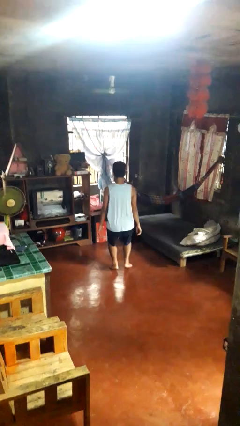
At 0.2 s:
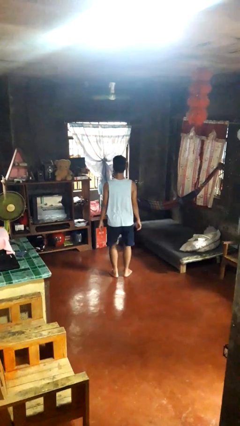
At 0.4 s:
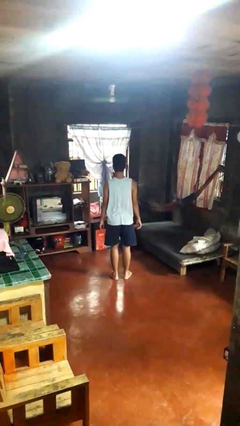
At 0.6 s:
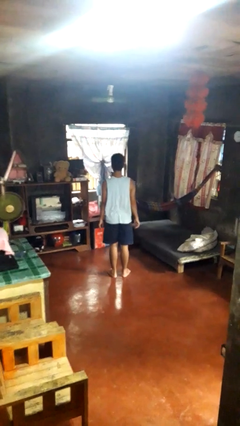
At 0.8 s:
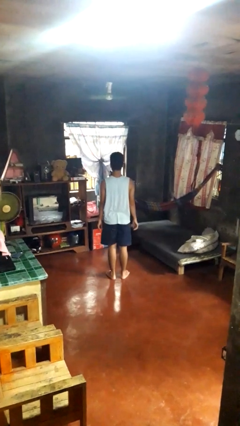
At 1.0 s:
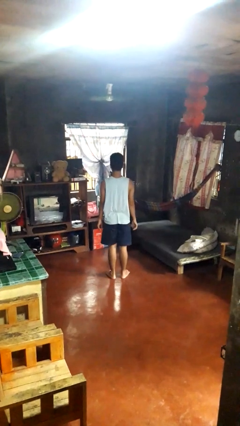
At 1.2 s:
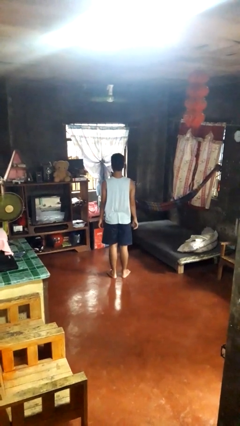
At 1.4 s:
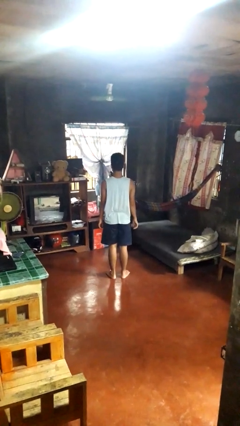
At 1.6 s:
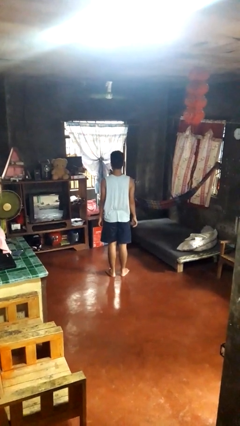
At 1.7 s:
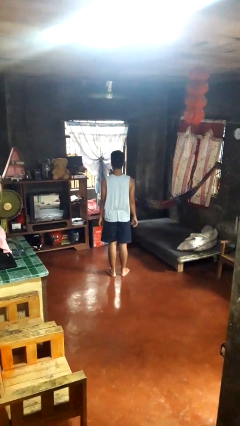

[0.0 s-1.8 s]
person stands up

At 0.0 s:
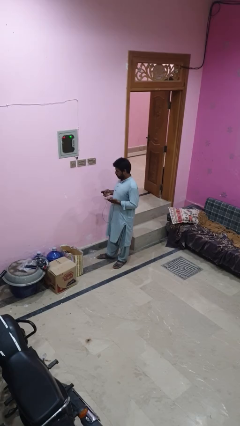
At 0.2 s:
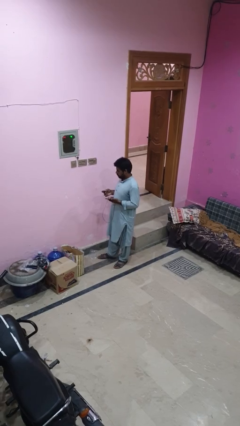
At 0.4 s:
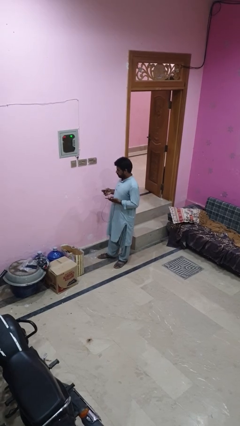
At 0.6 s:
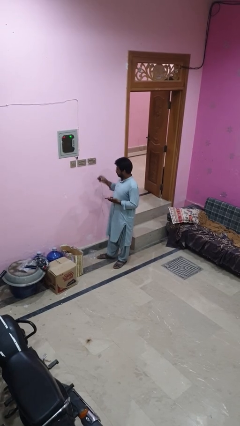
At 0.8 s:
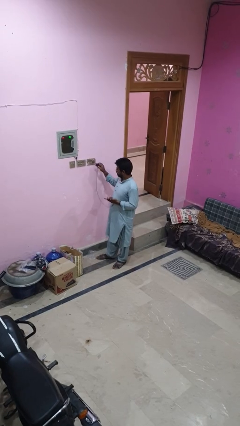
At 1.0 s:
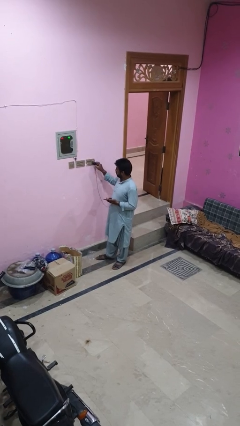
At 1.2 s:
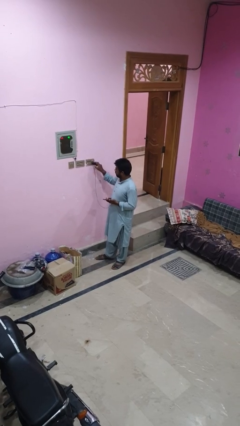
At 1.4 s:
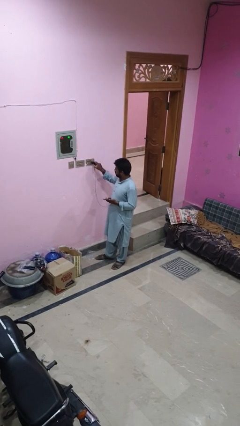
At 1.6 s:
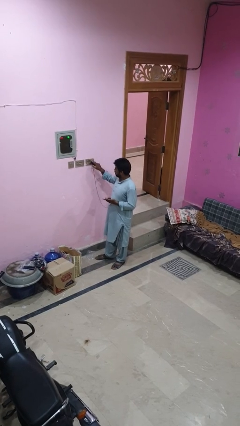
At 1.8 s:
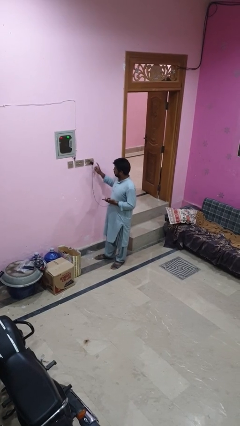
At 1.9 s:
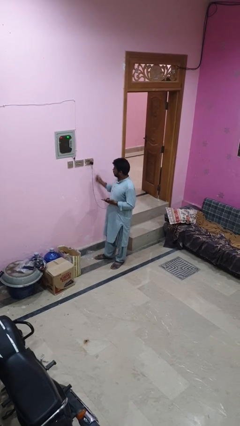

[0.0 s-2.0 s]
person plugs into electrical socket

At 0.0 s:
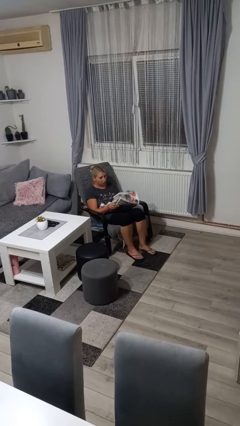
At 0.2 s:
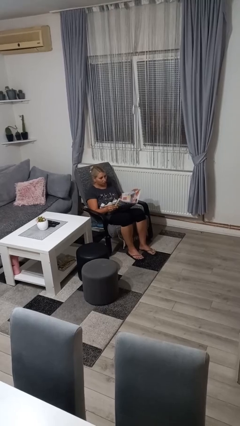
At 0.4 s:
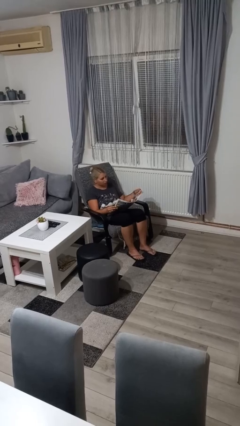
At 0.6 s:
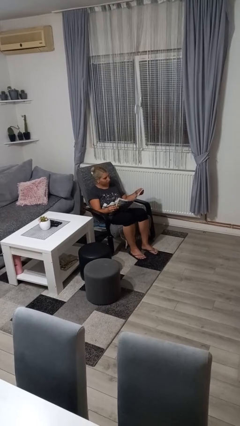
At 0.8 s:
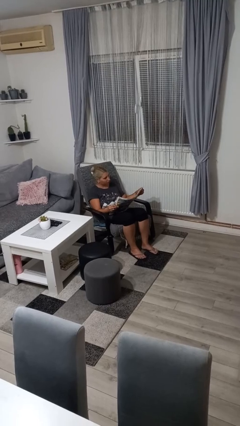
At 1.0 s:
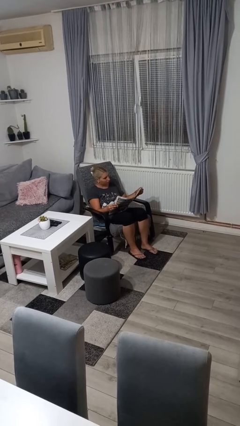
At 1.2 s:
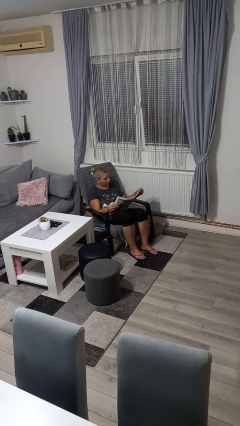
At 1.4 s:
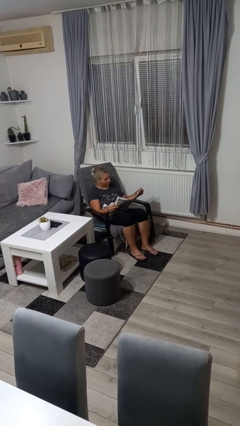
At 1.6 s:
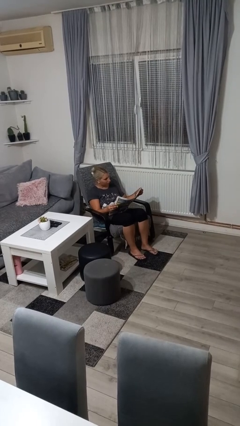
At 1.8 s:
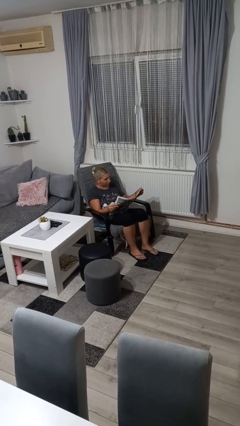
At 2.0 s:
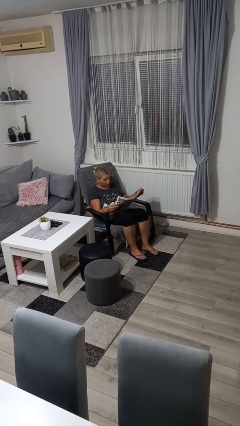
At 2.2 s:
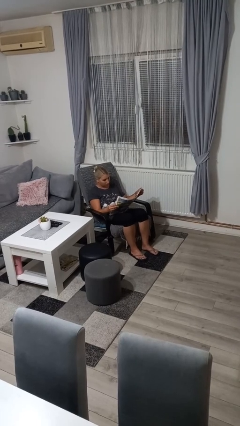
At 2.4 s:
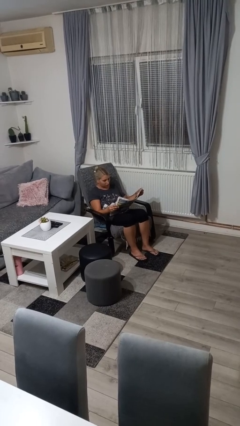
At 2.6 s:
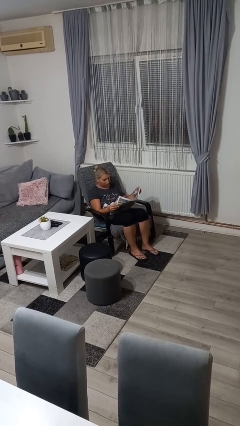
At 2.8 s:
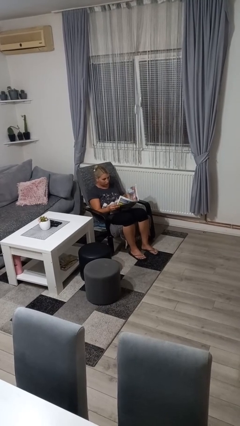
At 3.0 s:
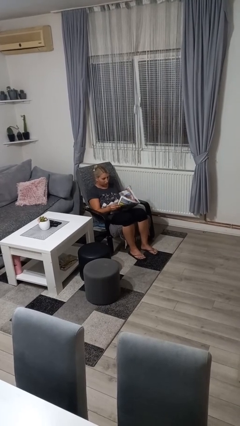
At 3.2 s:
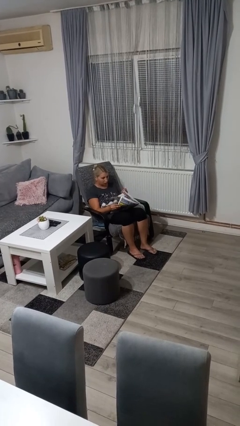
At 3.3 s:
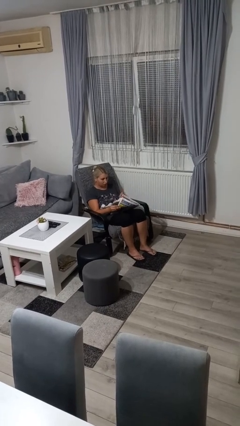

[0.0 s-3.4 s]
person reads newspaper

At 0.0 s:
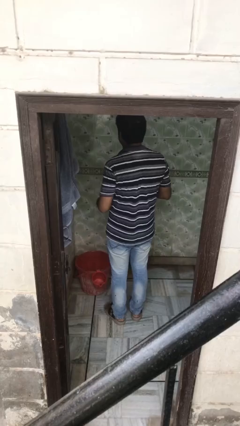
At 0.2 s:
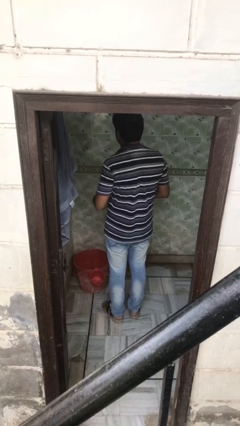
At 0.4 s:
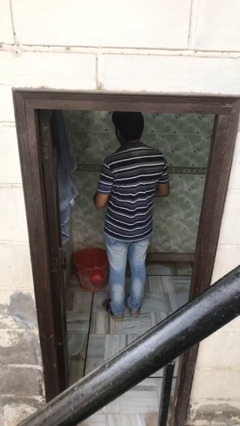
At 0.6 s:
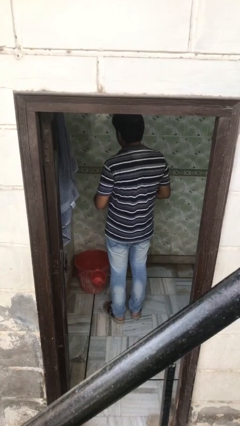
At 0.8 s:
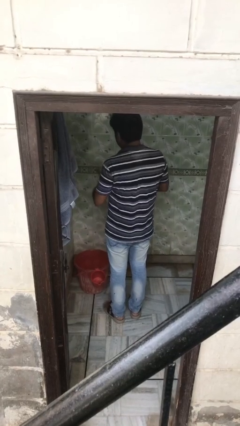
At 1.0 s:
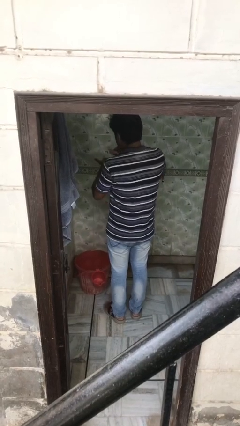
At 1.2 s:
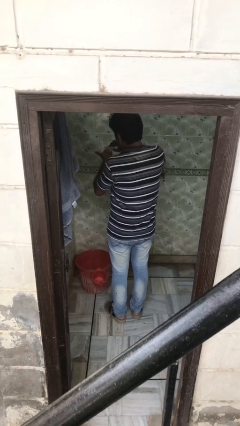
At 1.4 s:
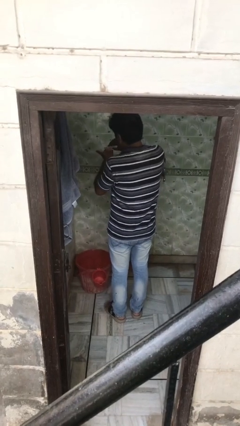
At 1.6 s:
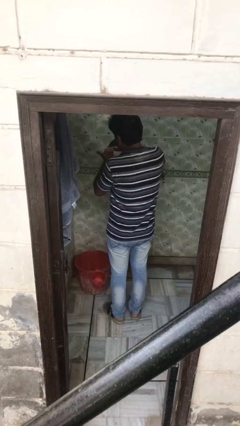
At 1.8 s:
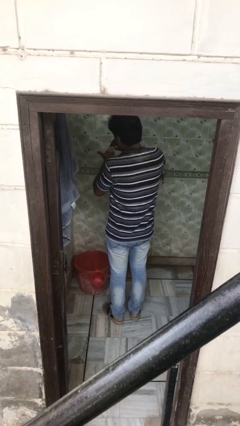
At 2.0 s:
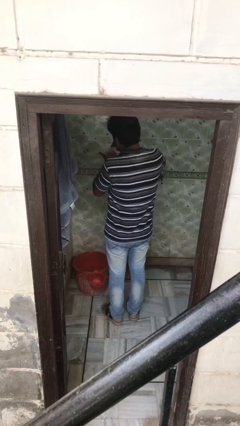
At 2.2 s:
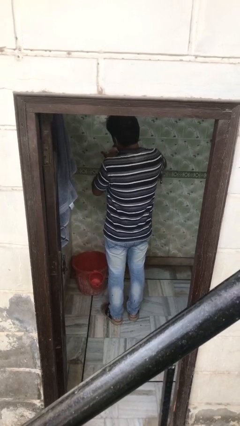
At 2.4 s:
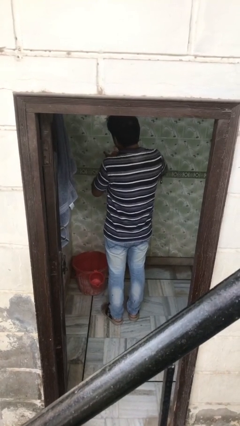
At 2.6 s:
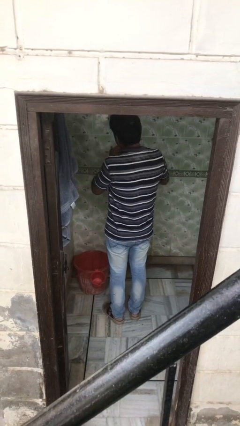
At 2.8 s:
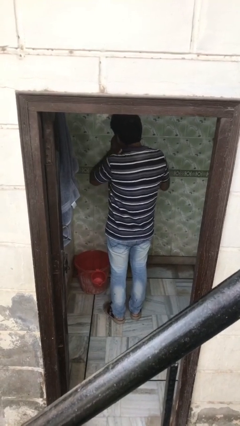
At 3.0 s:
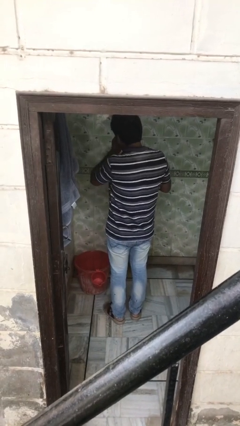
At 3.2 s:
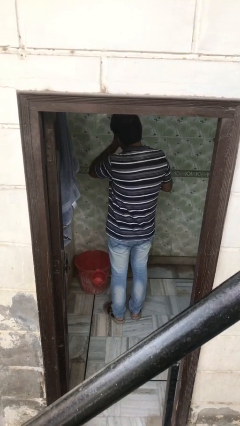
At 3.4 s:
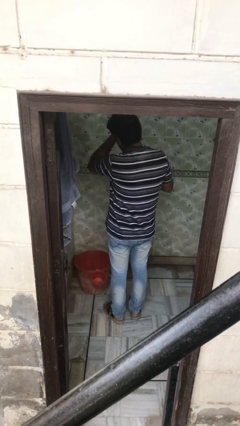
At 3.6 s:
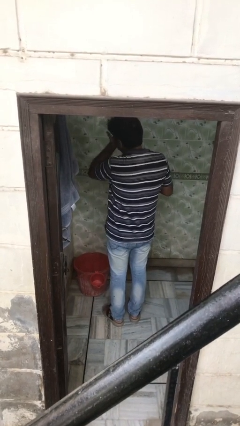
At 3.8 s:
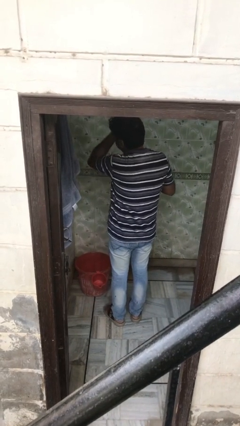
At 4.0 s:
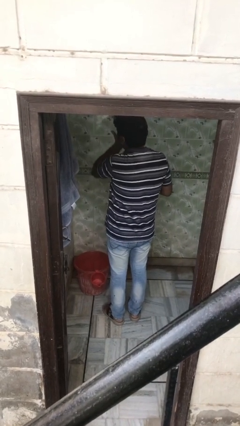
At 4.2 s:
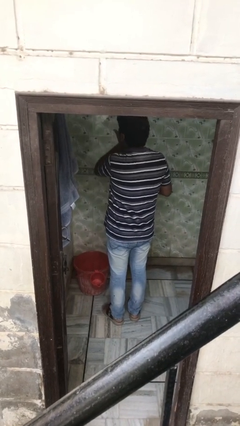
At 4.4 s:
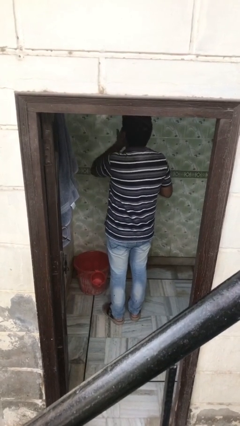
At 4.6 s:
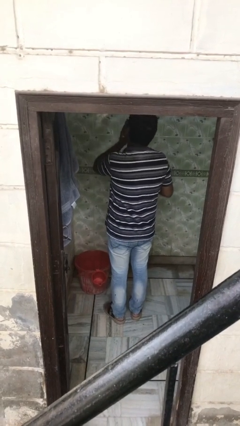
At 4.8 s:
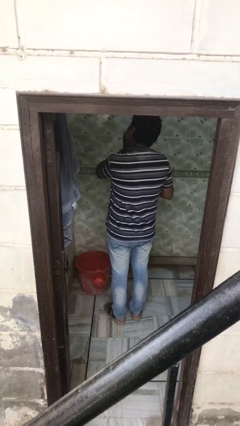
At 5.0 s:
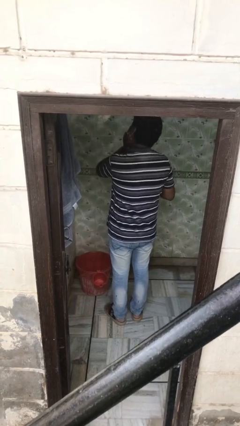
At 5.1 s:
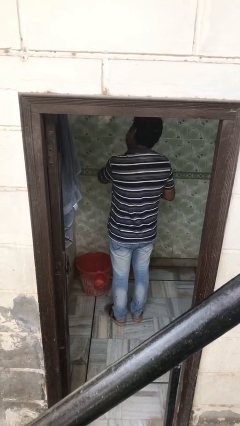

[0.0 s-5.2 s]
person applies facial moisturizer

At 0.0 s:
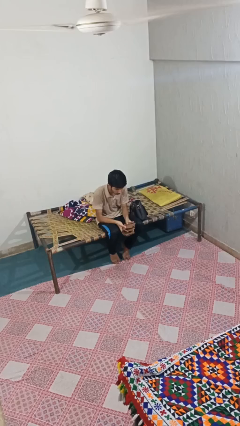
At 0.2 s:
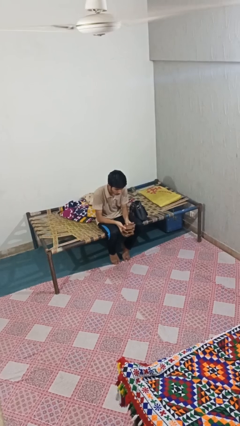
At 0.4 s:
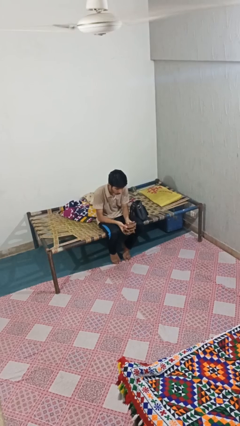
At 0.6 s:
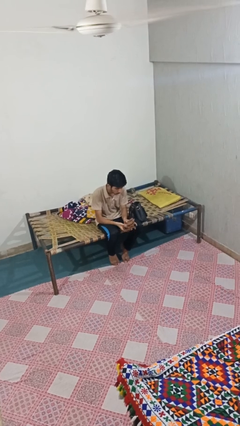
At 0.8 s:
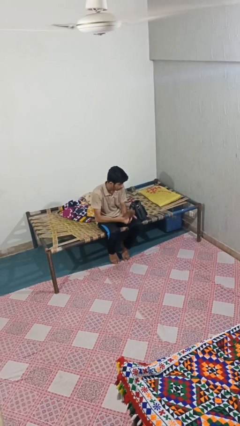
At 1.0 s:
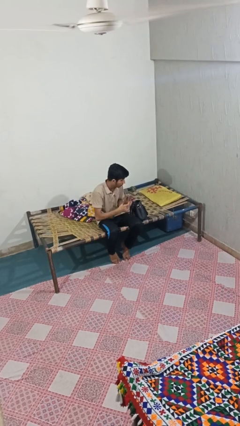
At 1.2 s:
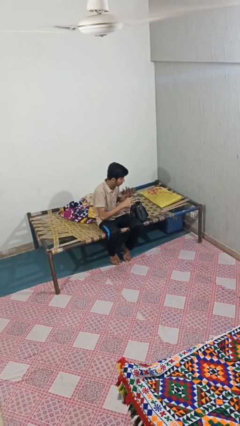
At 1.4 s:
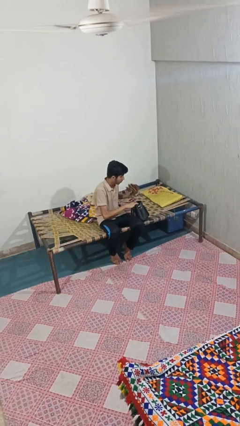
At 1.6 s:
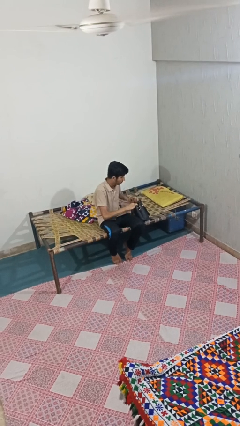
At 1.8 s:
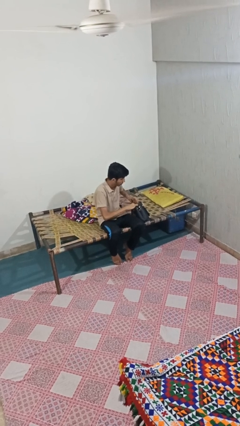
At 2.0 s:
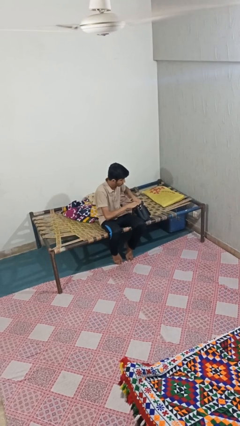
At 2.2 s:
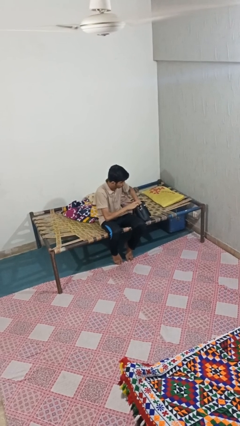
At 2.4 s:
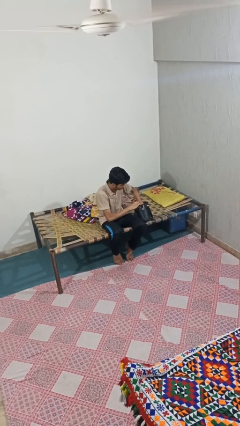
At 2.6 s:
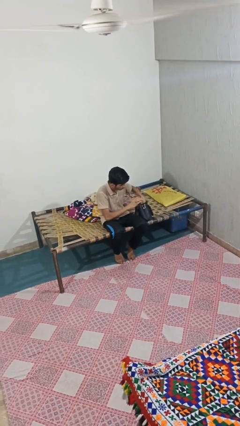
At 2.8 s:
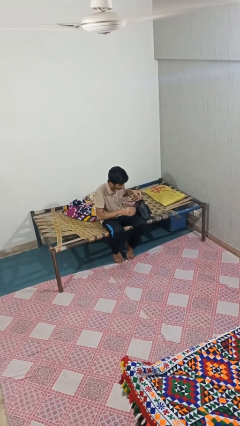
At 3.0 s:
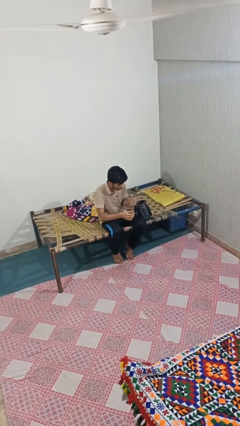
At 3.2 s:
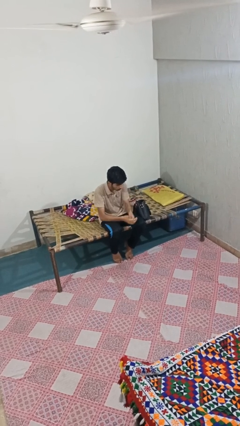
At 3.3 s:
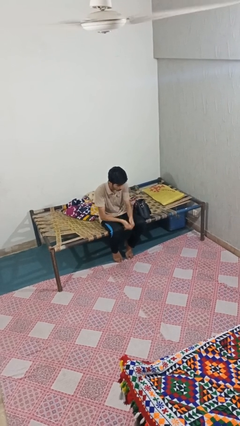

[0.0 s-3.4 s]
person puts object into purse

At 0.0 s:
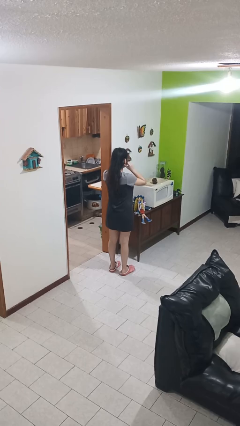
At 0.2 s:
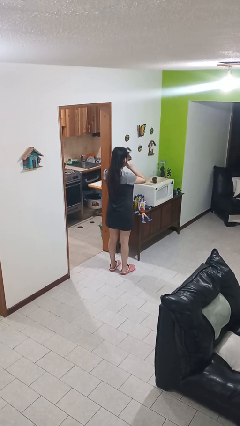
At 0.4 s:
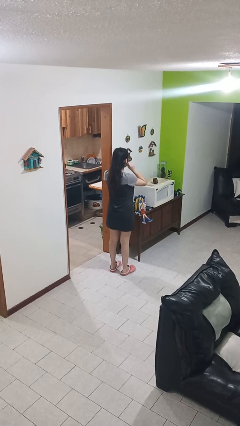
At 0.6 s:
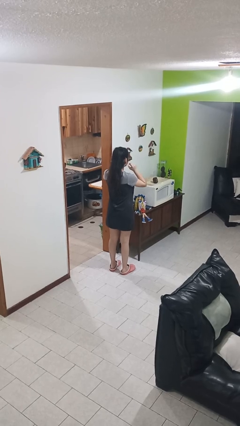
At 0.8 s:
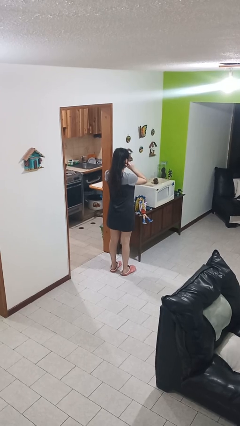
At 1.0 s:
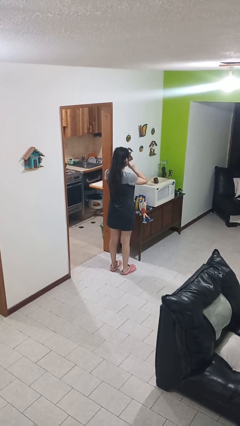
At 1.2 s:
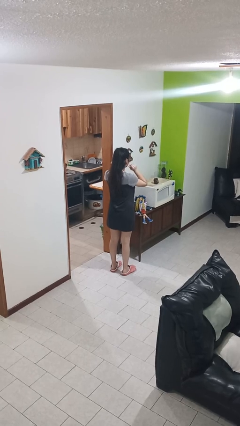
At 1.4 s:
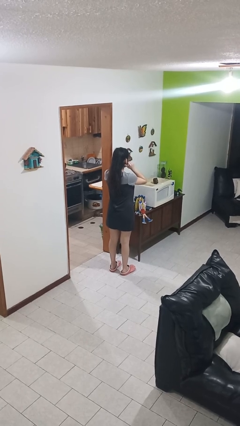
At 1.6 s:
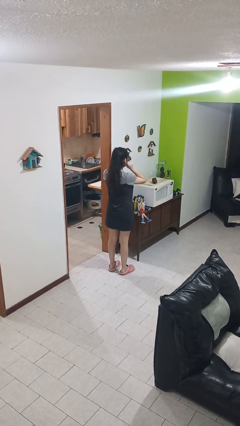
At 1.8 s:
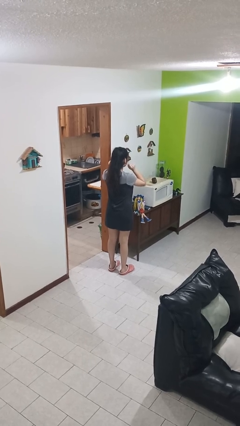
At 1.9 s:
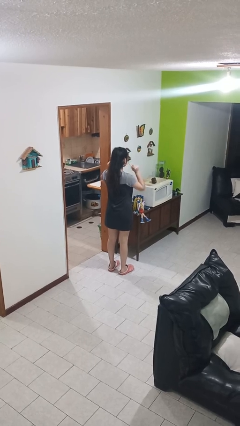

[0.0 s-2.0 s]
person touches earlobe
